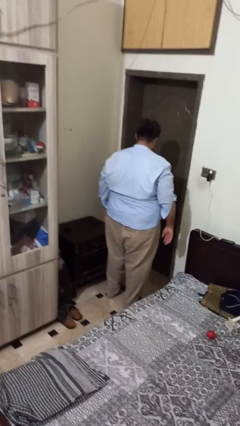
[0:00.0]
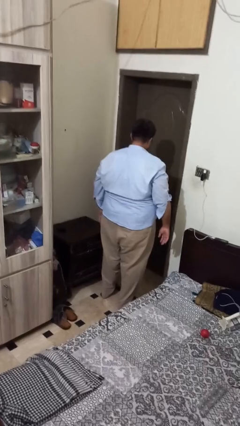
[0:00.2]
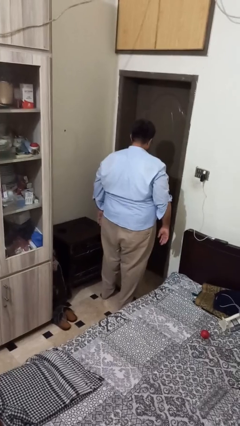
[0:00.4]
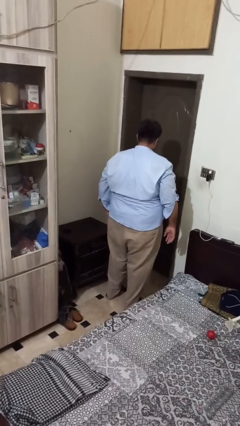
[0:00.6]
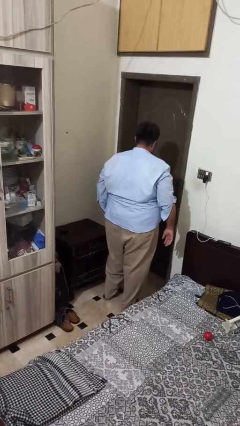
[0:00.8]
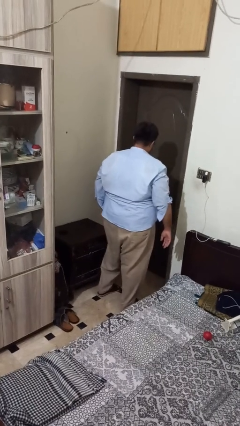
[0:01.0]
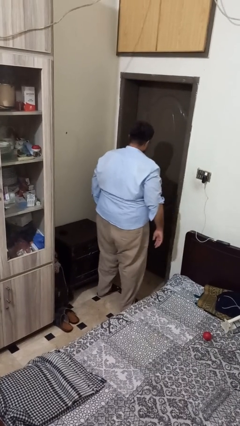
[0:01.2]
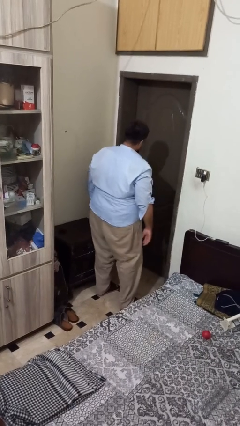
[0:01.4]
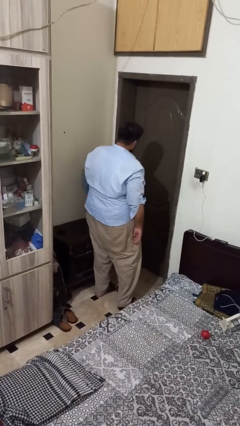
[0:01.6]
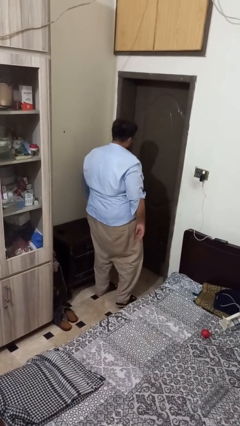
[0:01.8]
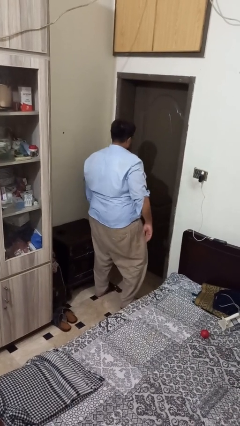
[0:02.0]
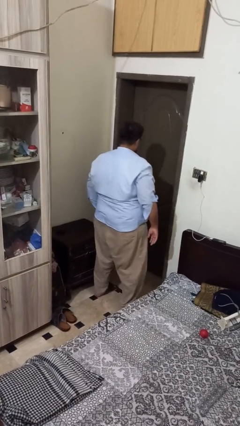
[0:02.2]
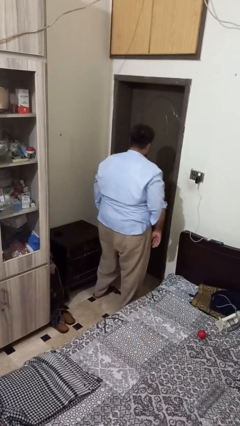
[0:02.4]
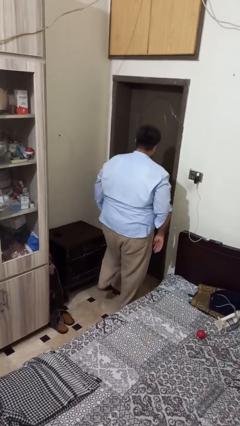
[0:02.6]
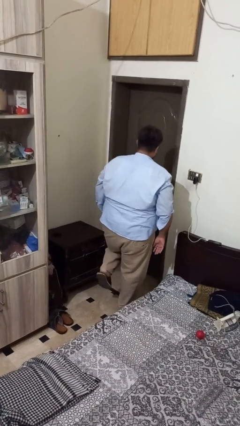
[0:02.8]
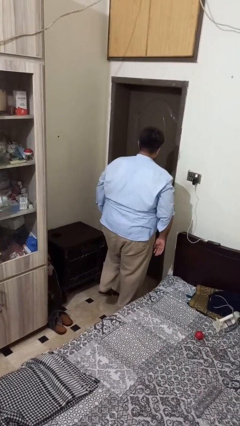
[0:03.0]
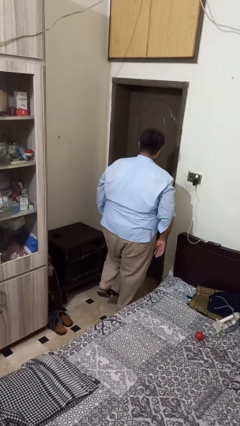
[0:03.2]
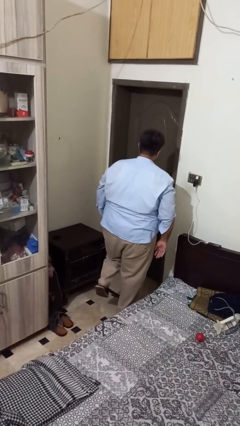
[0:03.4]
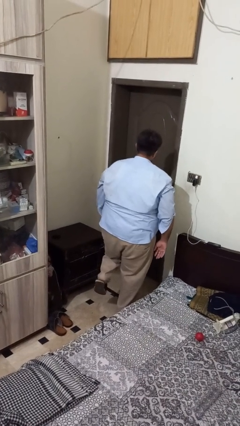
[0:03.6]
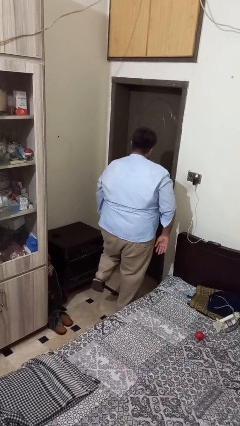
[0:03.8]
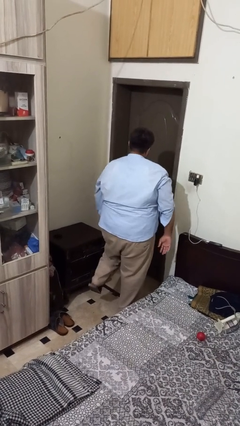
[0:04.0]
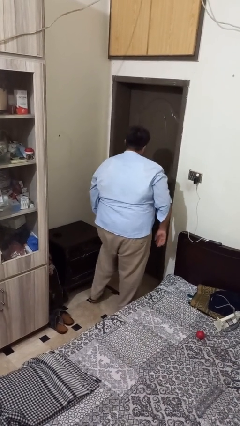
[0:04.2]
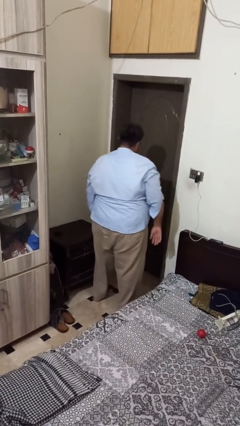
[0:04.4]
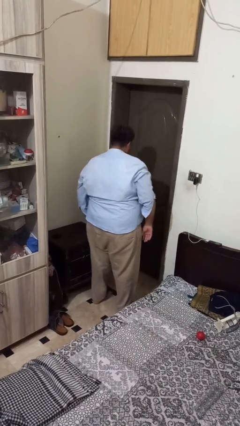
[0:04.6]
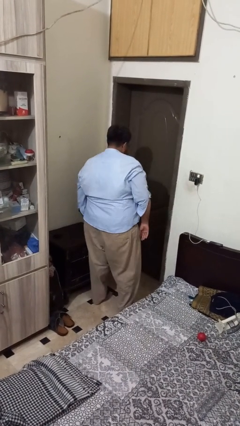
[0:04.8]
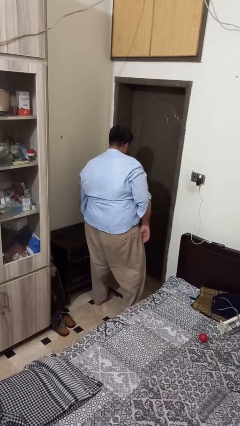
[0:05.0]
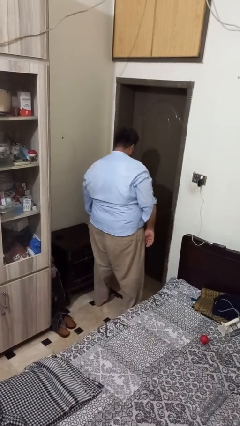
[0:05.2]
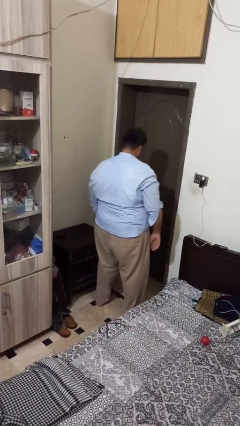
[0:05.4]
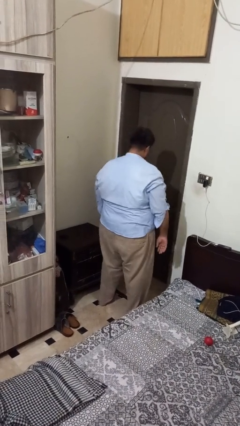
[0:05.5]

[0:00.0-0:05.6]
person bumps into table

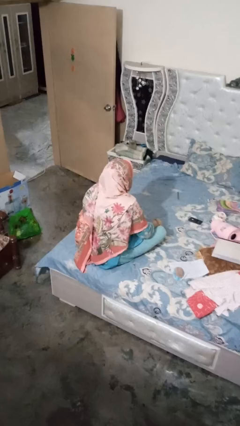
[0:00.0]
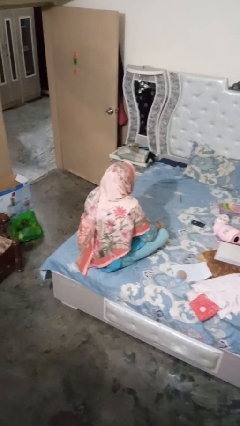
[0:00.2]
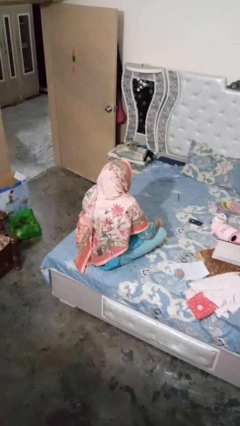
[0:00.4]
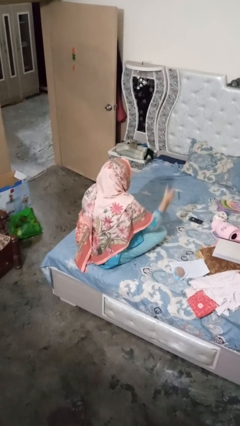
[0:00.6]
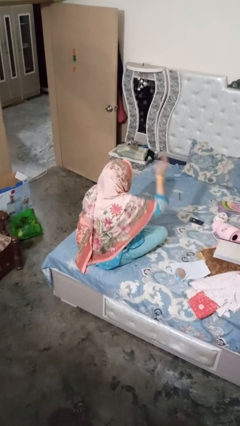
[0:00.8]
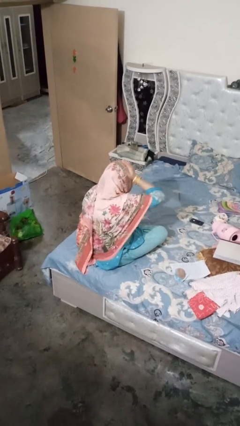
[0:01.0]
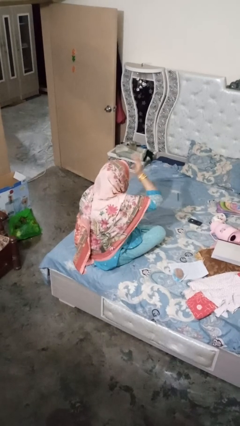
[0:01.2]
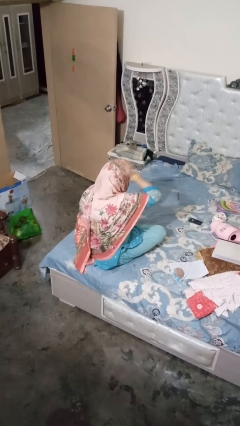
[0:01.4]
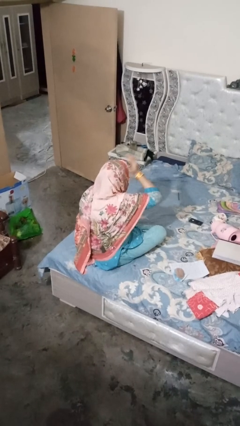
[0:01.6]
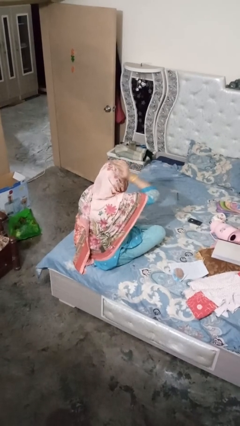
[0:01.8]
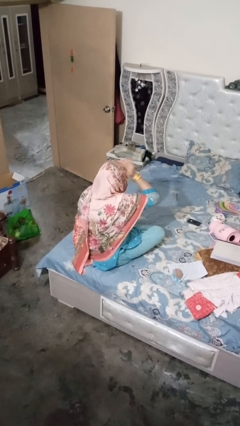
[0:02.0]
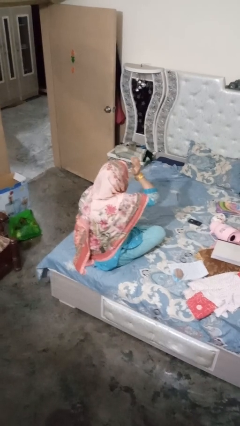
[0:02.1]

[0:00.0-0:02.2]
person pats head

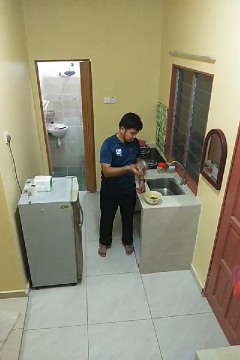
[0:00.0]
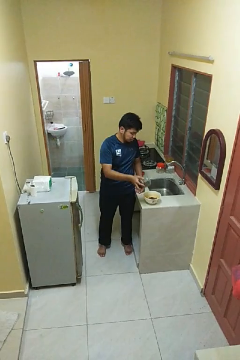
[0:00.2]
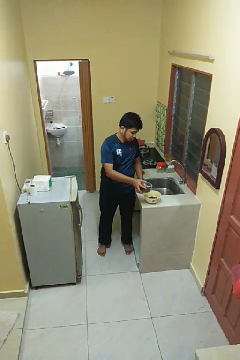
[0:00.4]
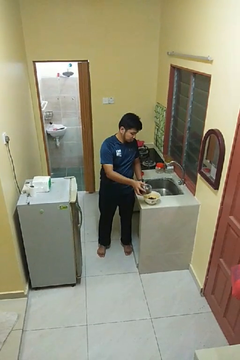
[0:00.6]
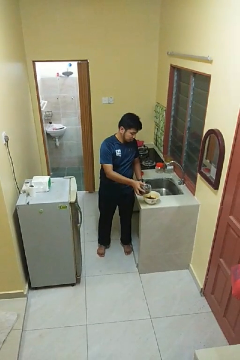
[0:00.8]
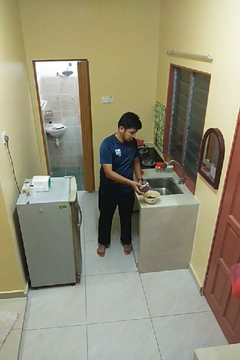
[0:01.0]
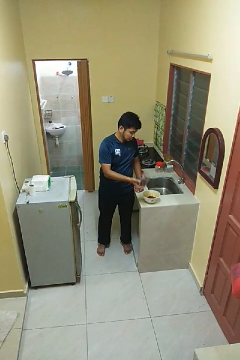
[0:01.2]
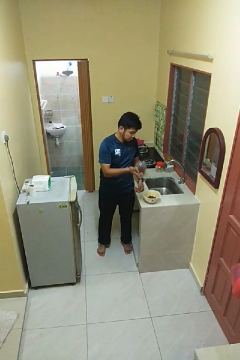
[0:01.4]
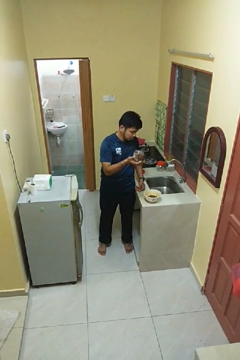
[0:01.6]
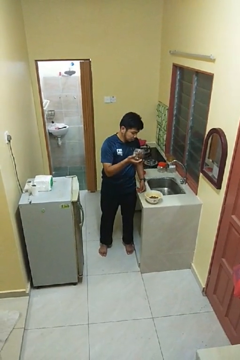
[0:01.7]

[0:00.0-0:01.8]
person pours into bowl

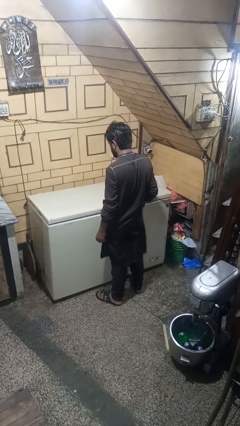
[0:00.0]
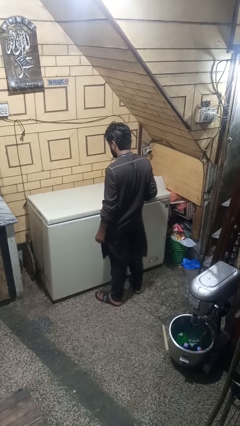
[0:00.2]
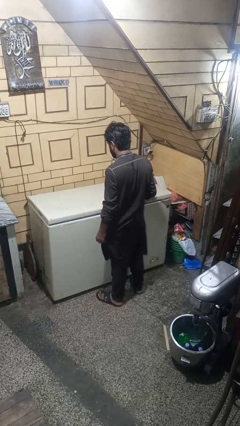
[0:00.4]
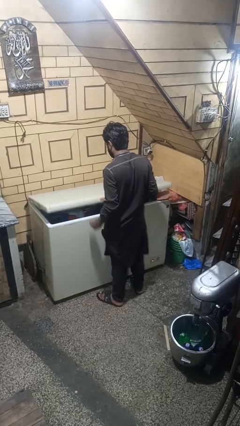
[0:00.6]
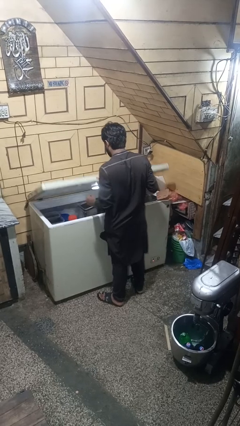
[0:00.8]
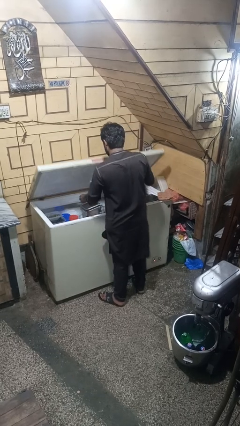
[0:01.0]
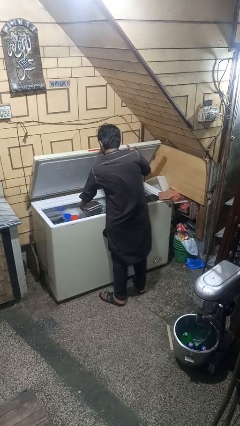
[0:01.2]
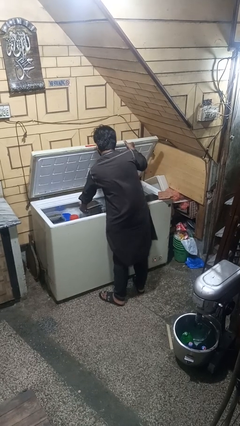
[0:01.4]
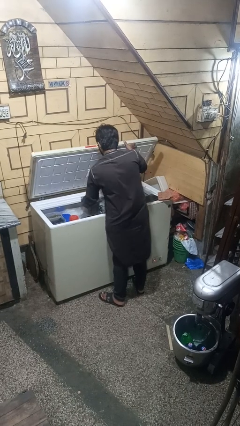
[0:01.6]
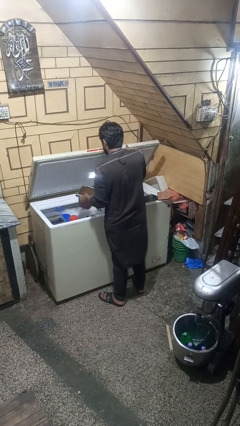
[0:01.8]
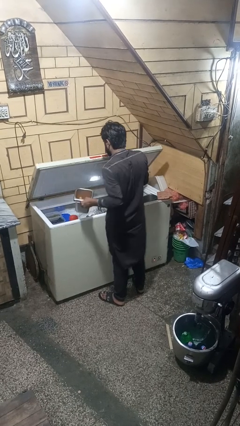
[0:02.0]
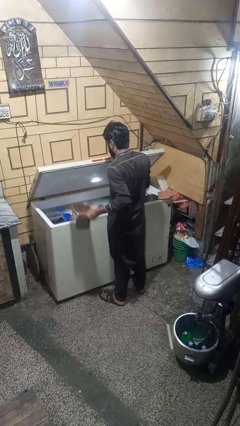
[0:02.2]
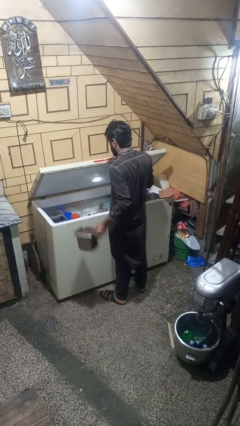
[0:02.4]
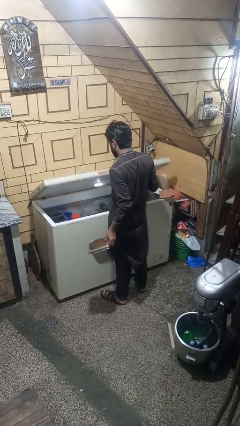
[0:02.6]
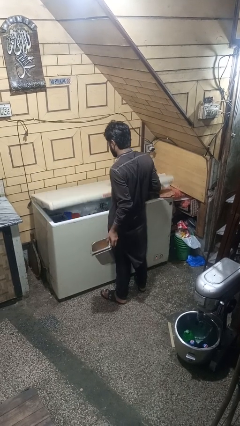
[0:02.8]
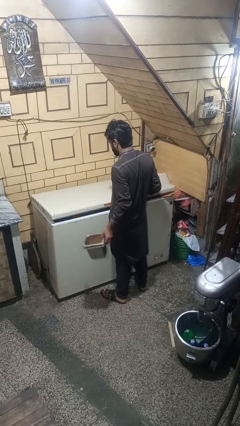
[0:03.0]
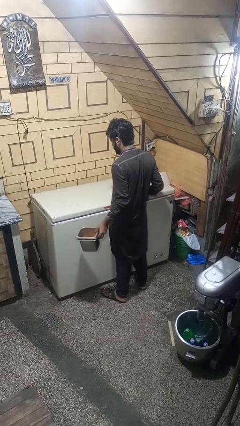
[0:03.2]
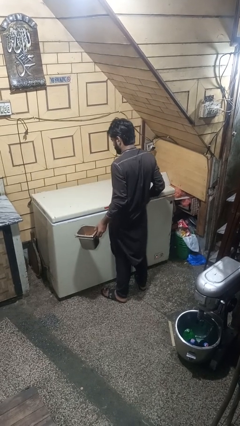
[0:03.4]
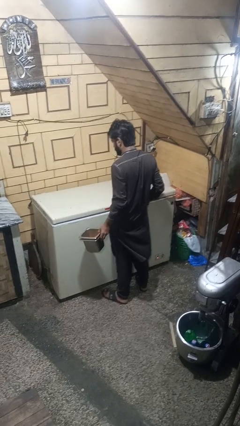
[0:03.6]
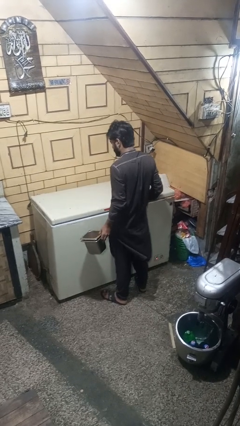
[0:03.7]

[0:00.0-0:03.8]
person takes object from refrigerator

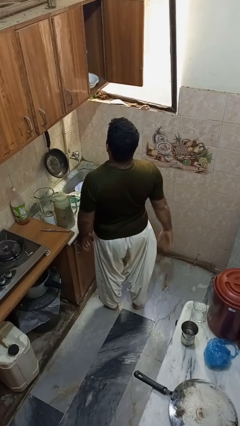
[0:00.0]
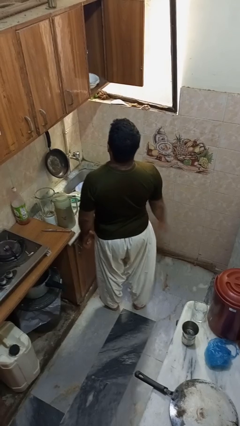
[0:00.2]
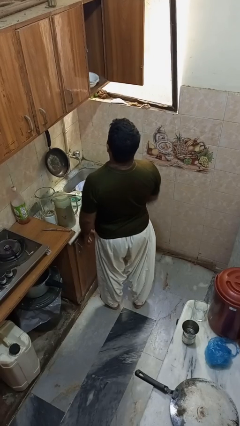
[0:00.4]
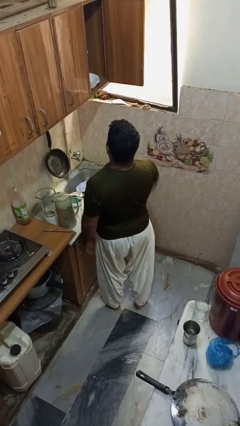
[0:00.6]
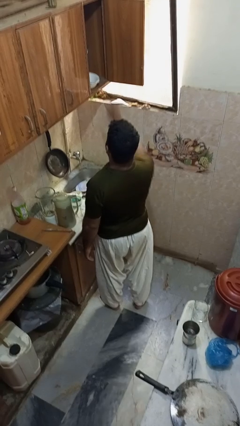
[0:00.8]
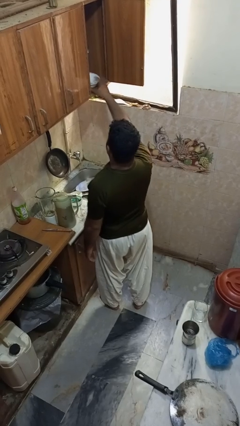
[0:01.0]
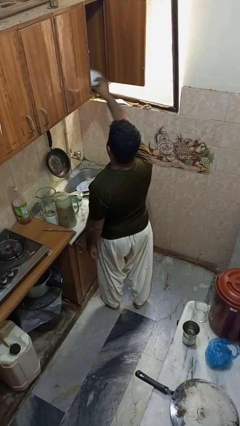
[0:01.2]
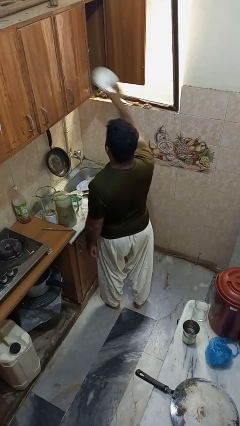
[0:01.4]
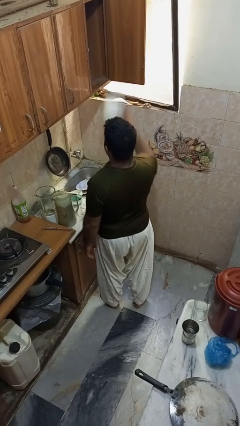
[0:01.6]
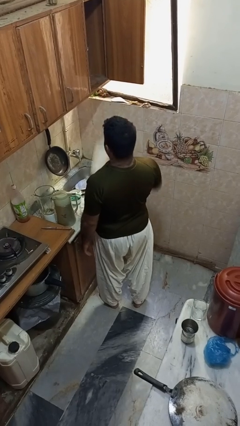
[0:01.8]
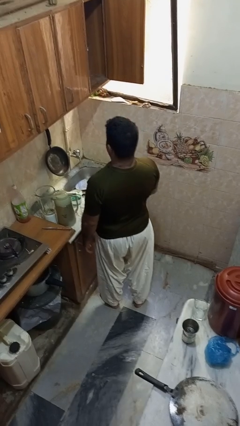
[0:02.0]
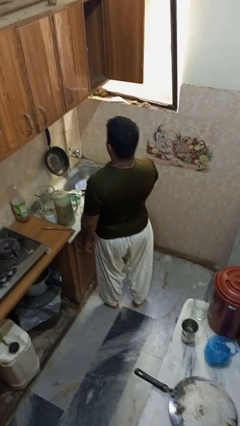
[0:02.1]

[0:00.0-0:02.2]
person takes object from cabinet

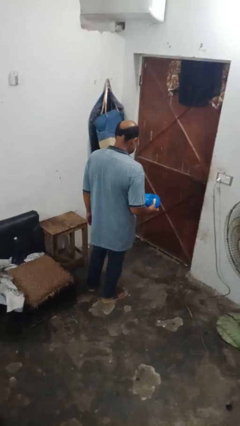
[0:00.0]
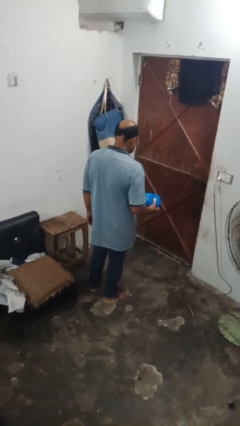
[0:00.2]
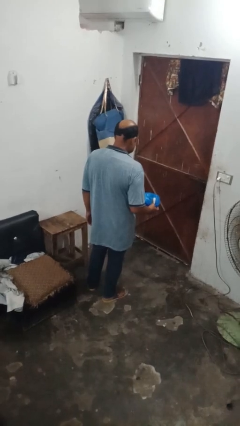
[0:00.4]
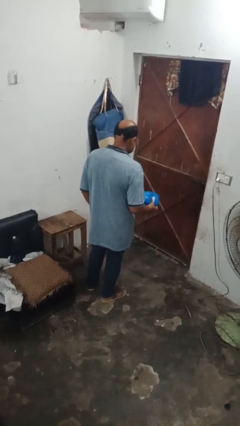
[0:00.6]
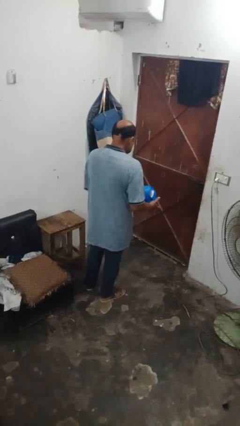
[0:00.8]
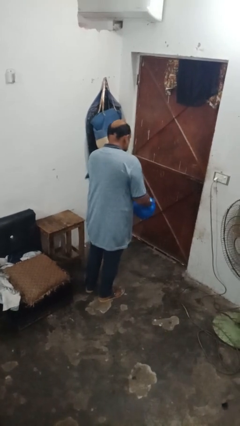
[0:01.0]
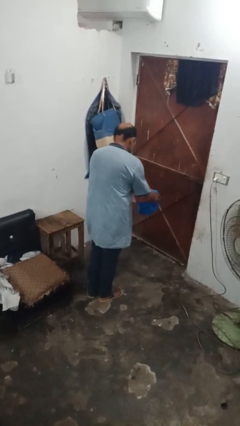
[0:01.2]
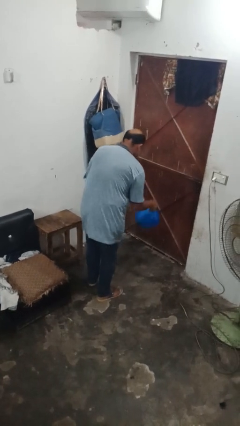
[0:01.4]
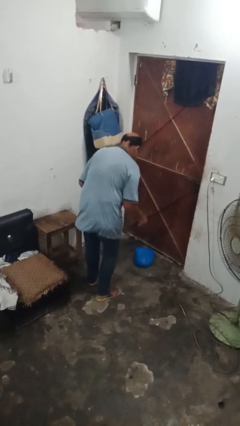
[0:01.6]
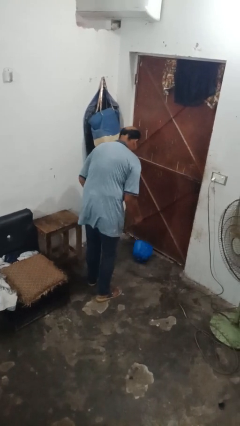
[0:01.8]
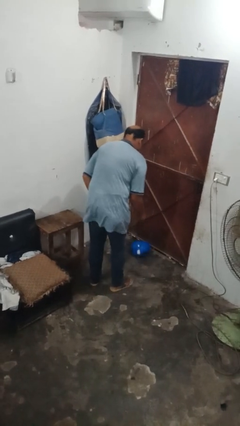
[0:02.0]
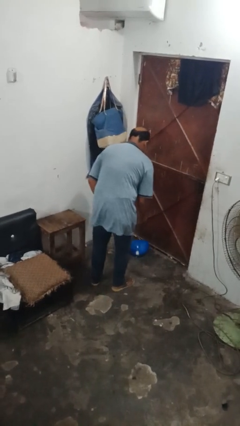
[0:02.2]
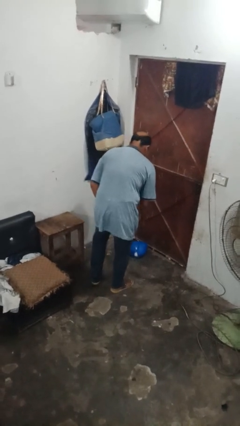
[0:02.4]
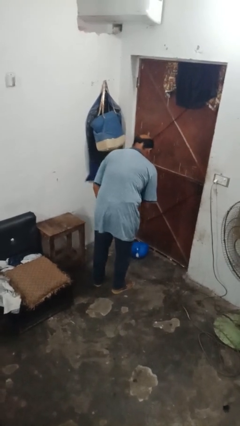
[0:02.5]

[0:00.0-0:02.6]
person drops object
